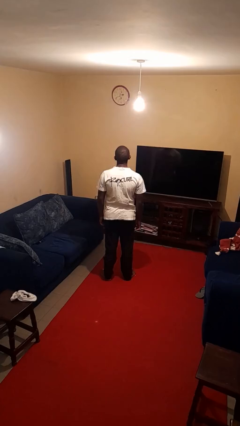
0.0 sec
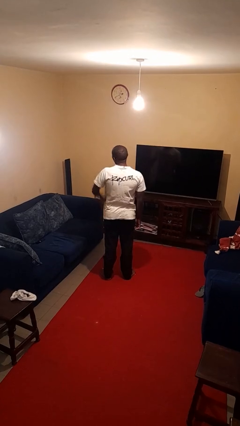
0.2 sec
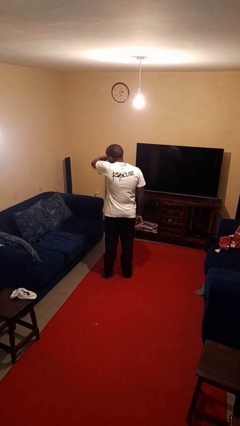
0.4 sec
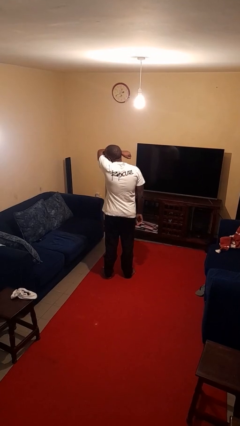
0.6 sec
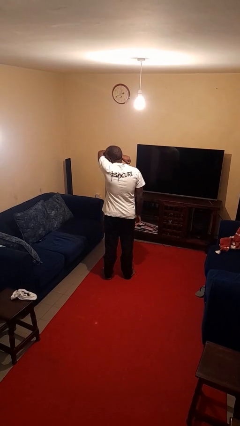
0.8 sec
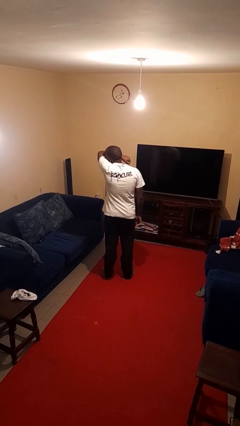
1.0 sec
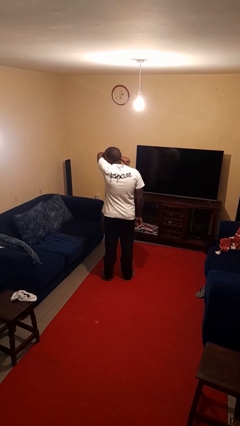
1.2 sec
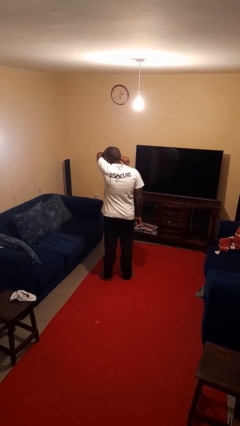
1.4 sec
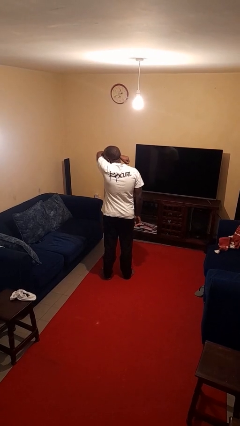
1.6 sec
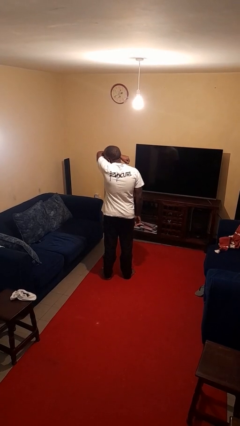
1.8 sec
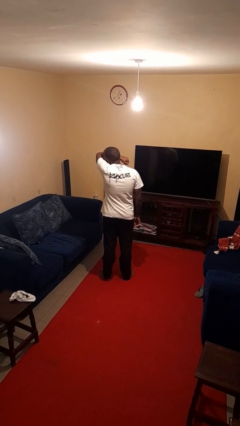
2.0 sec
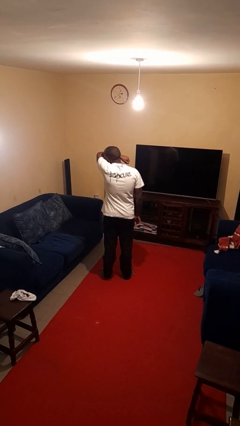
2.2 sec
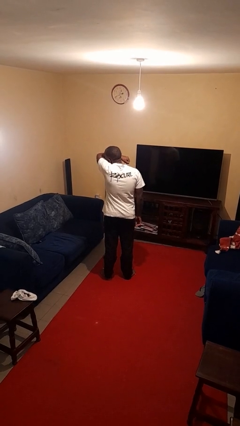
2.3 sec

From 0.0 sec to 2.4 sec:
person sneezes into arm

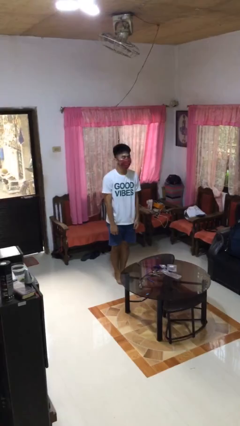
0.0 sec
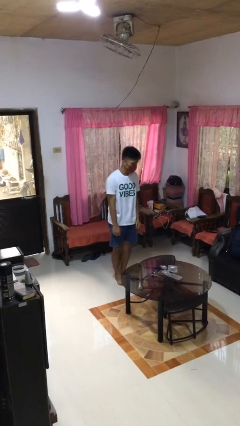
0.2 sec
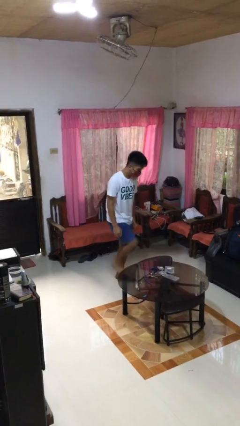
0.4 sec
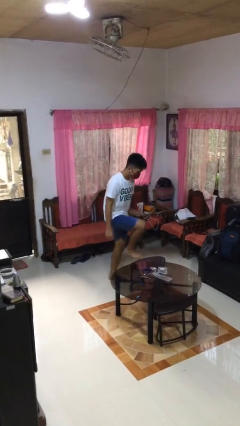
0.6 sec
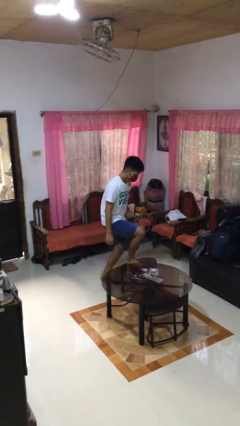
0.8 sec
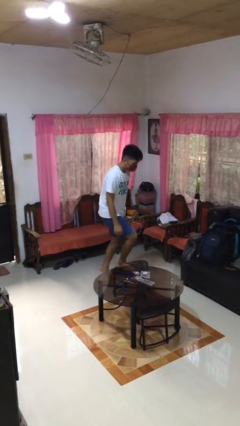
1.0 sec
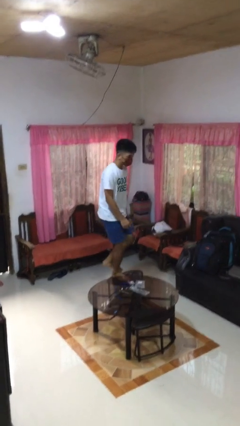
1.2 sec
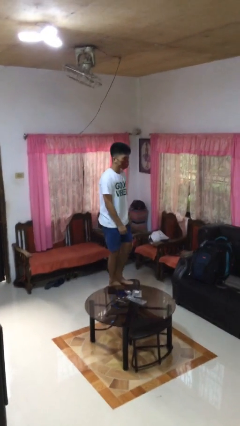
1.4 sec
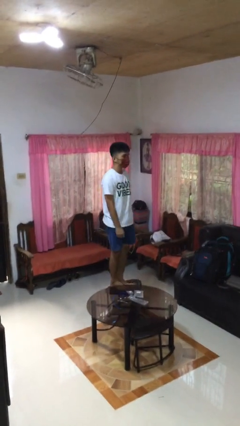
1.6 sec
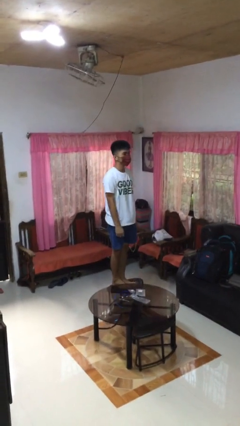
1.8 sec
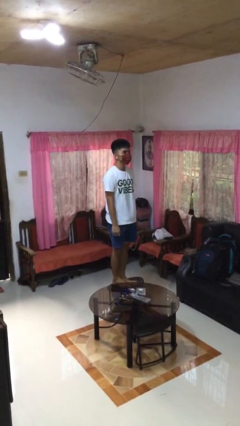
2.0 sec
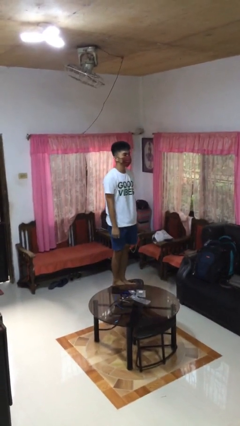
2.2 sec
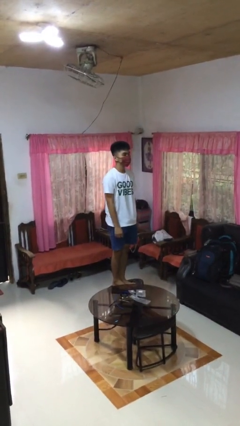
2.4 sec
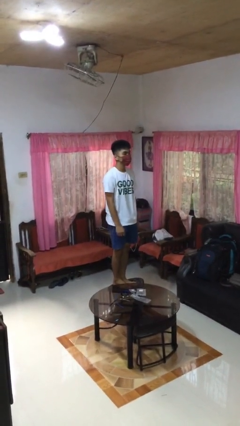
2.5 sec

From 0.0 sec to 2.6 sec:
person climbs on chair

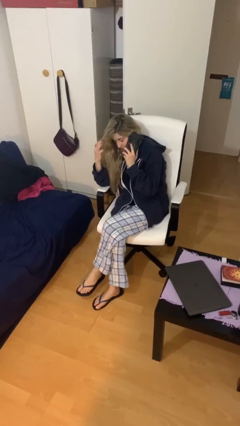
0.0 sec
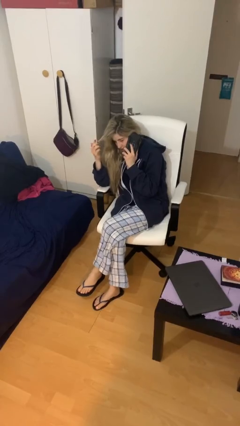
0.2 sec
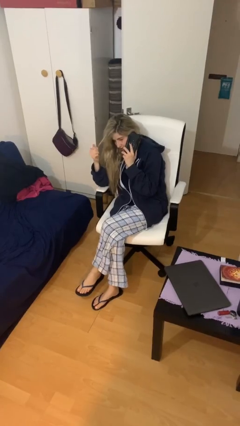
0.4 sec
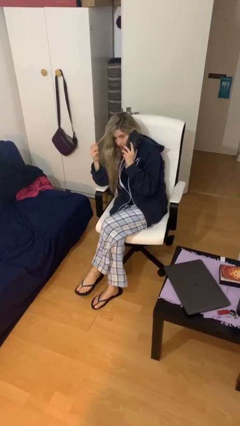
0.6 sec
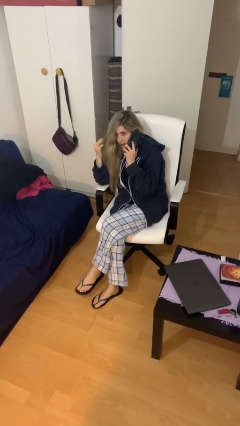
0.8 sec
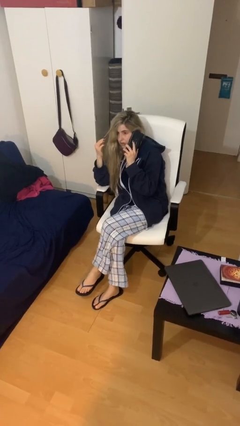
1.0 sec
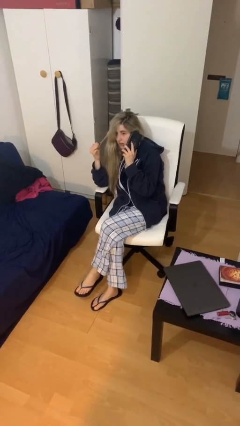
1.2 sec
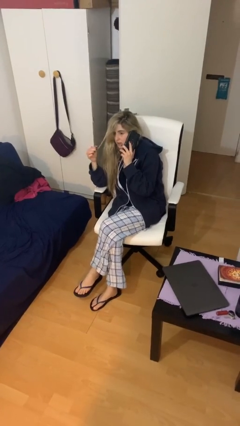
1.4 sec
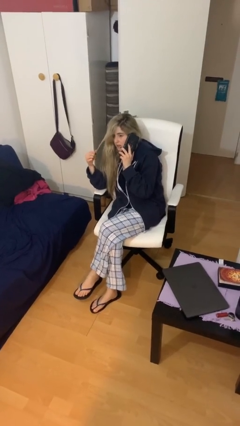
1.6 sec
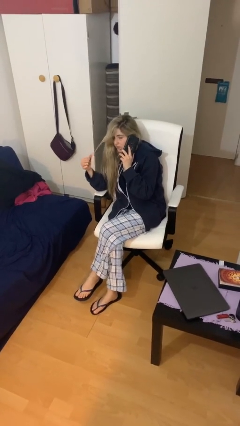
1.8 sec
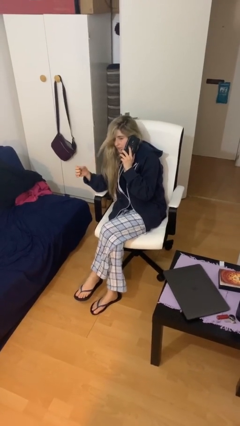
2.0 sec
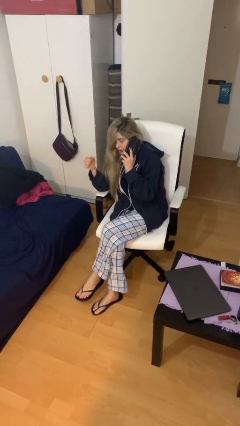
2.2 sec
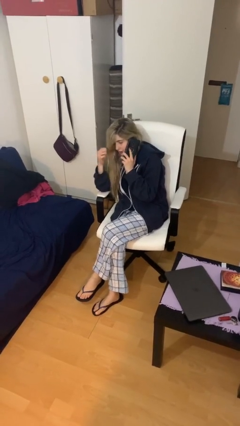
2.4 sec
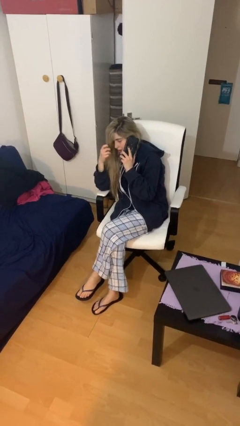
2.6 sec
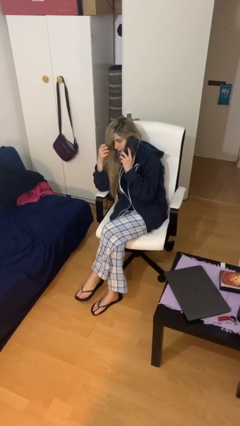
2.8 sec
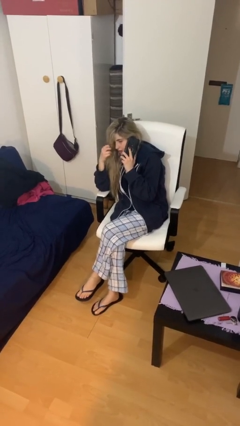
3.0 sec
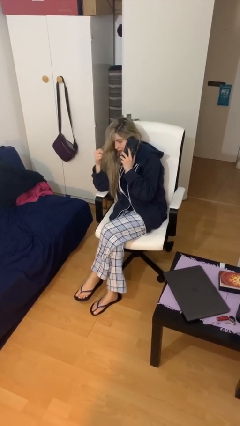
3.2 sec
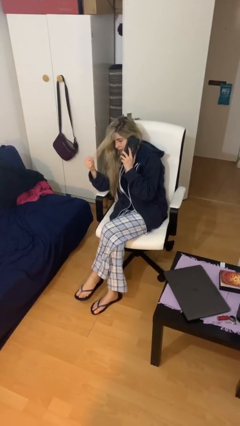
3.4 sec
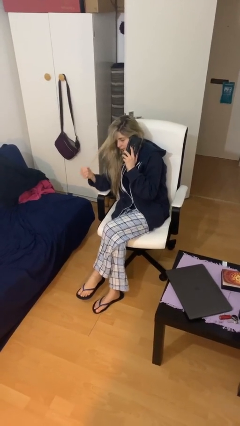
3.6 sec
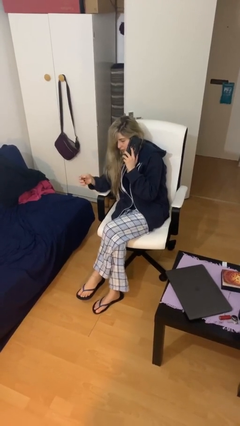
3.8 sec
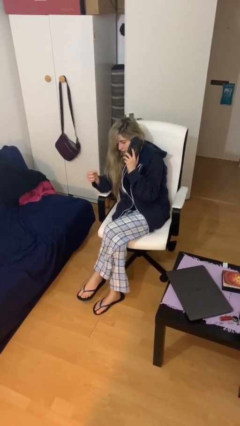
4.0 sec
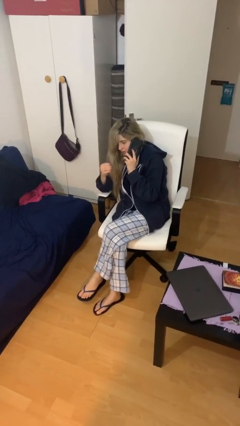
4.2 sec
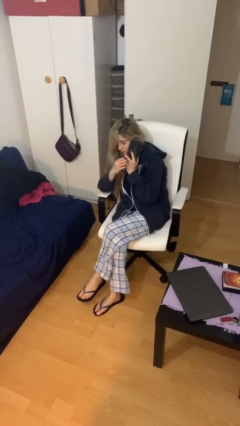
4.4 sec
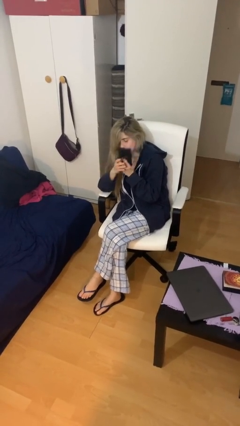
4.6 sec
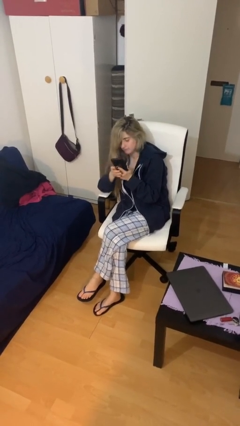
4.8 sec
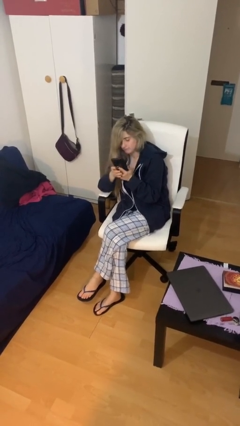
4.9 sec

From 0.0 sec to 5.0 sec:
person talks on phone

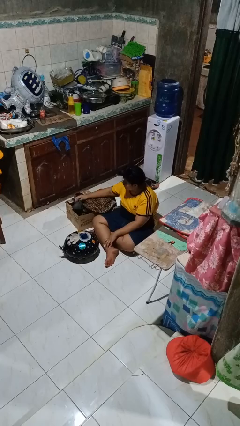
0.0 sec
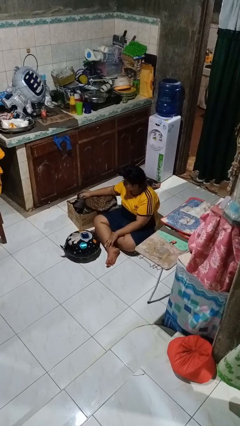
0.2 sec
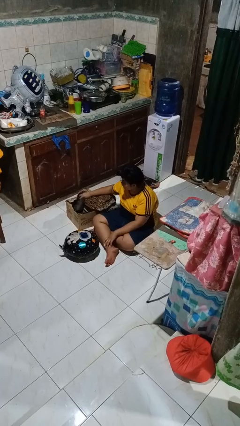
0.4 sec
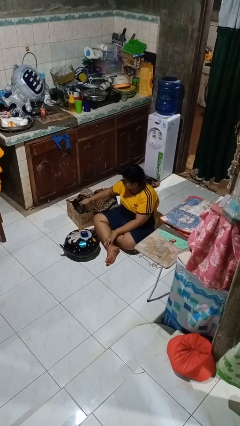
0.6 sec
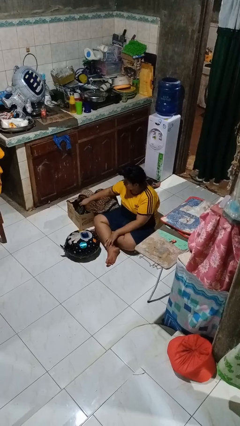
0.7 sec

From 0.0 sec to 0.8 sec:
person puts object into box

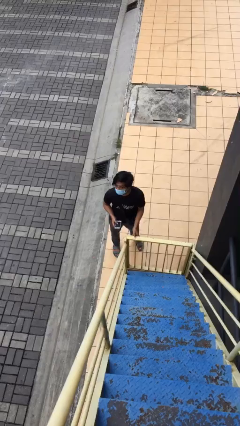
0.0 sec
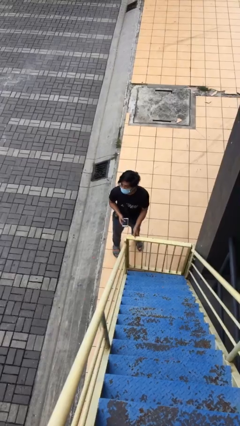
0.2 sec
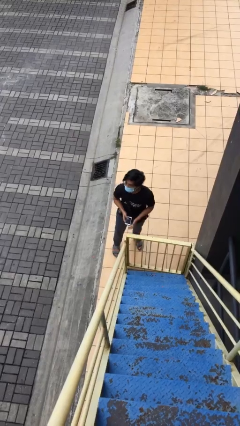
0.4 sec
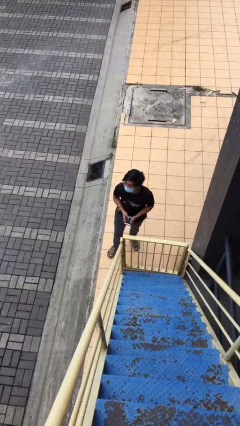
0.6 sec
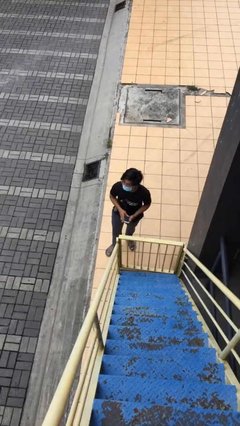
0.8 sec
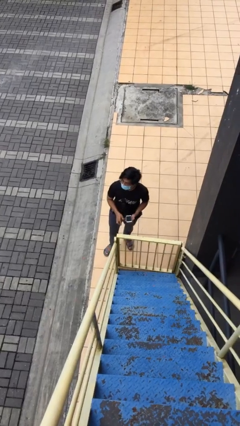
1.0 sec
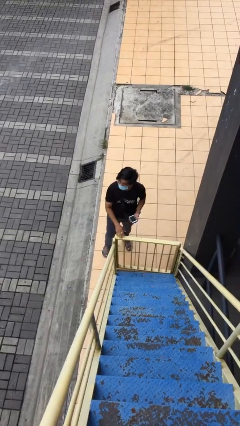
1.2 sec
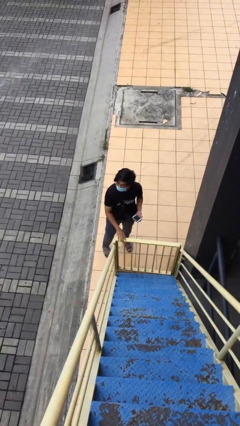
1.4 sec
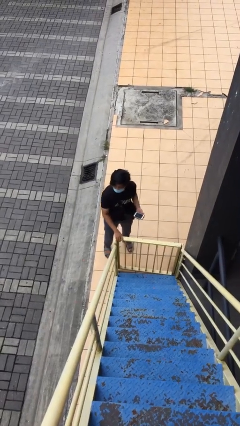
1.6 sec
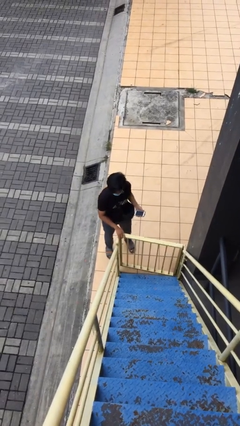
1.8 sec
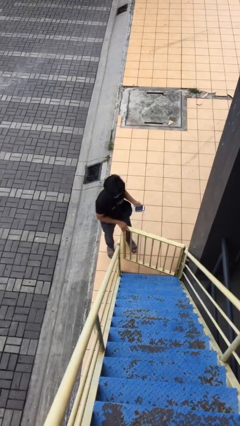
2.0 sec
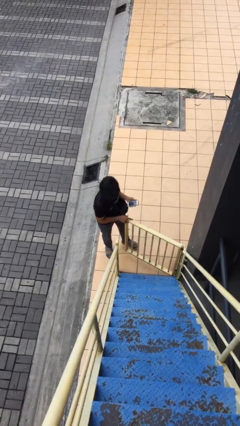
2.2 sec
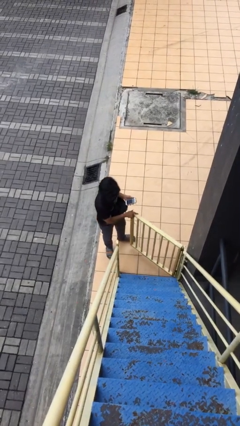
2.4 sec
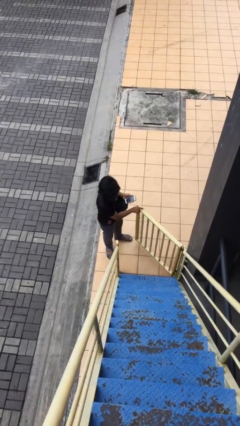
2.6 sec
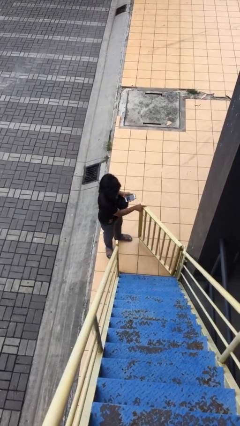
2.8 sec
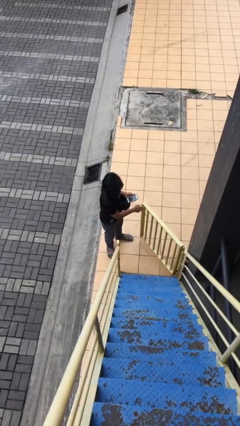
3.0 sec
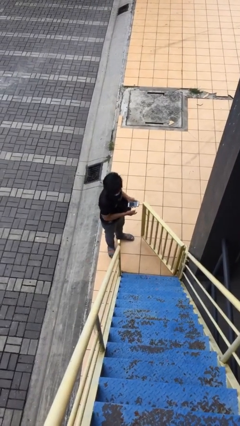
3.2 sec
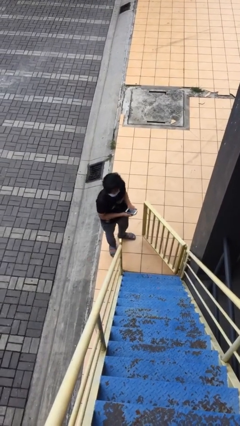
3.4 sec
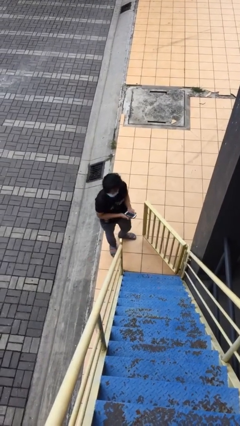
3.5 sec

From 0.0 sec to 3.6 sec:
person opens facility door

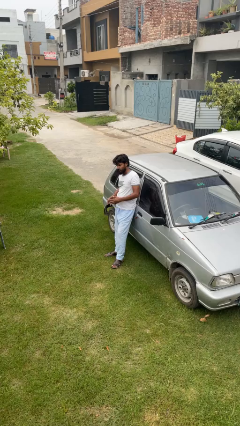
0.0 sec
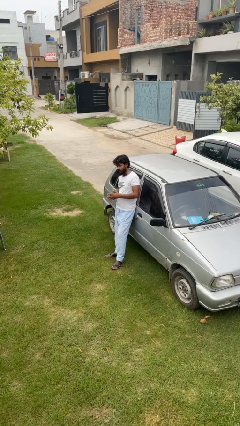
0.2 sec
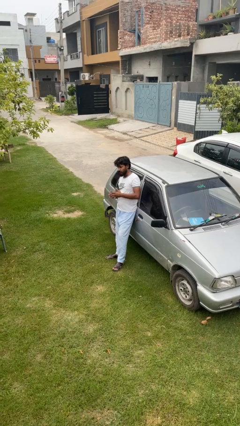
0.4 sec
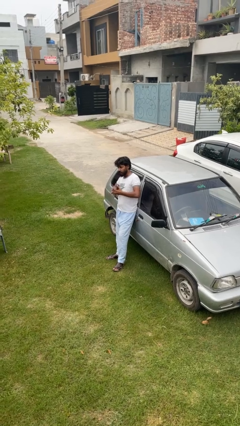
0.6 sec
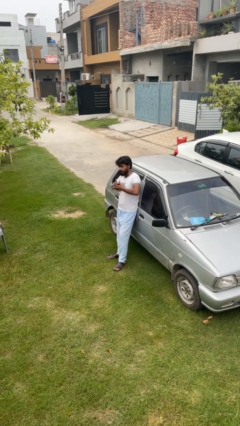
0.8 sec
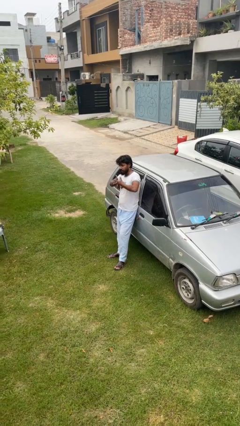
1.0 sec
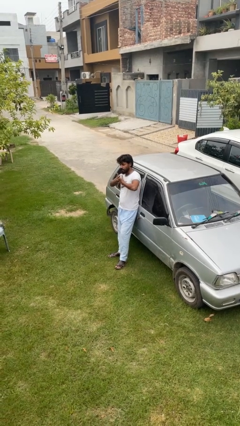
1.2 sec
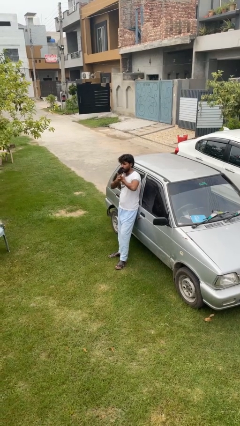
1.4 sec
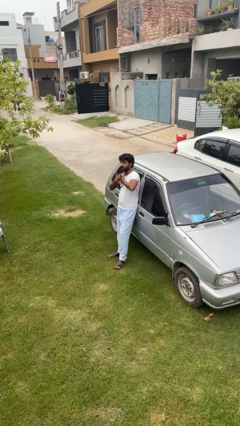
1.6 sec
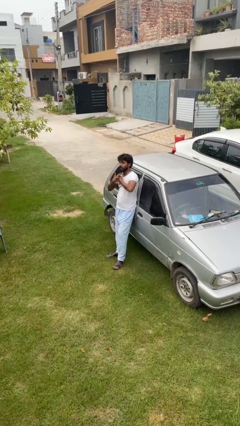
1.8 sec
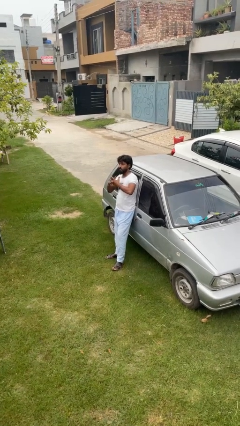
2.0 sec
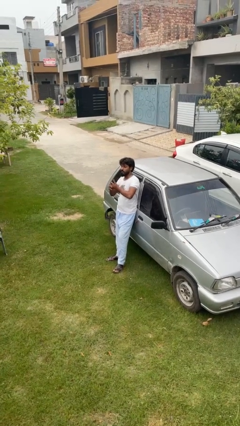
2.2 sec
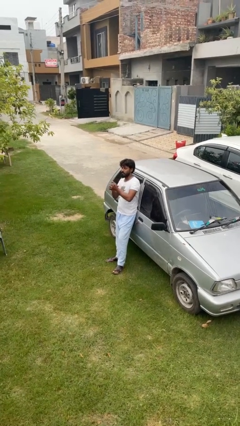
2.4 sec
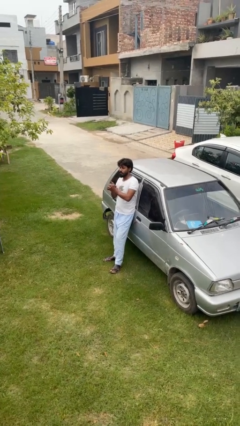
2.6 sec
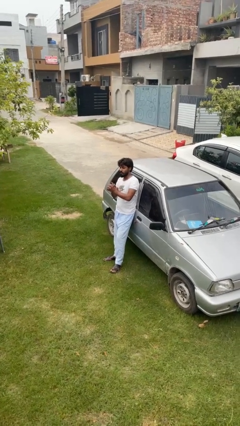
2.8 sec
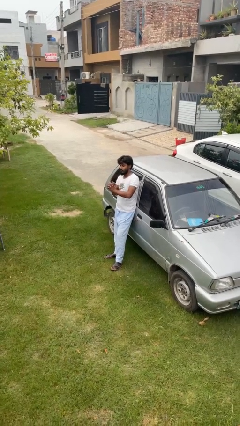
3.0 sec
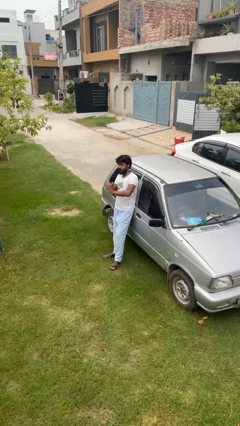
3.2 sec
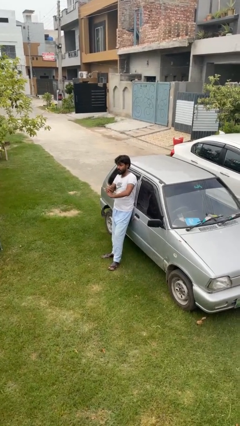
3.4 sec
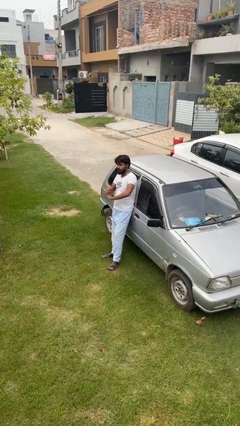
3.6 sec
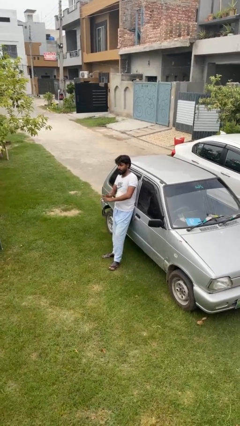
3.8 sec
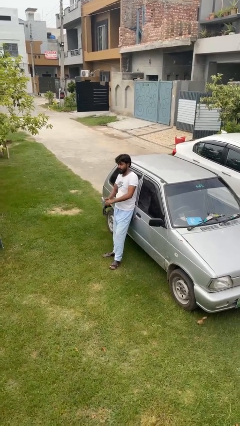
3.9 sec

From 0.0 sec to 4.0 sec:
person cracks knuckles
